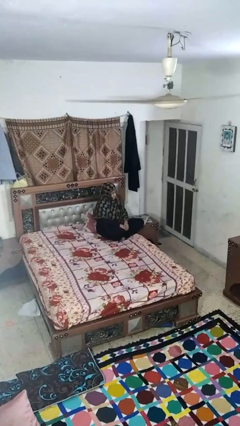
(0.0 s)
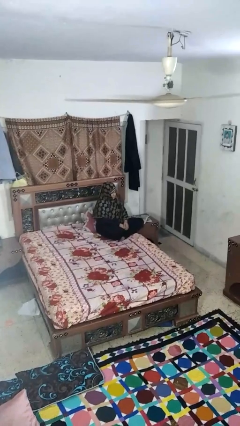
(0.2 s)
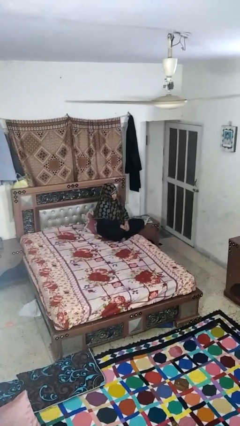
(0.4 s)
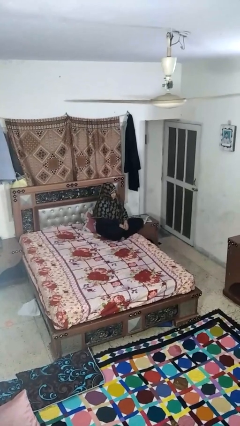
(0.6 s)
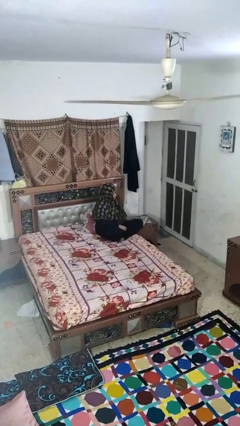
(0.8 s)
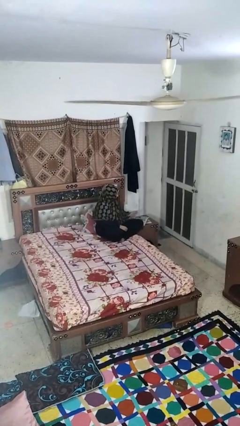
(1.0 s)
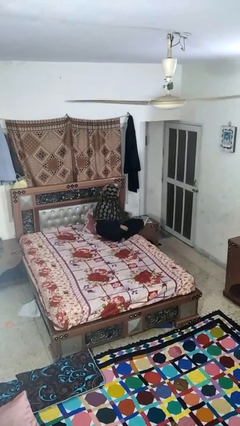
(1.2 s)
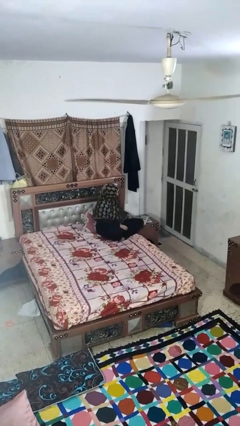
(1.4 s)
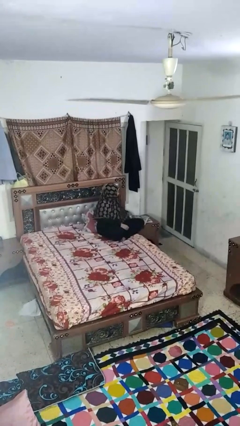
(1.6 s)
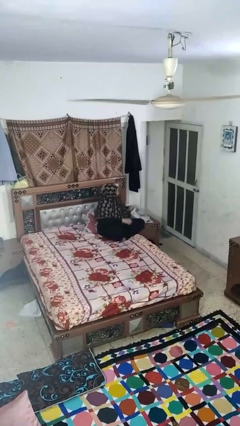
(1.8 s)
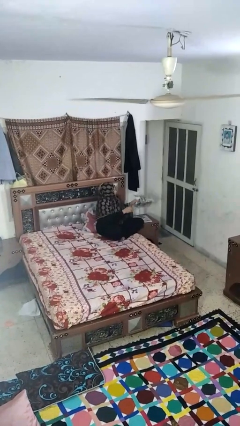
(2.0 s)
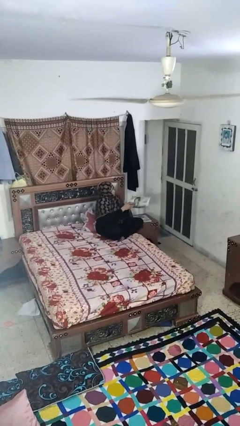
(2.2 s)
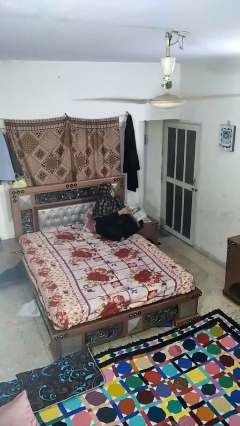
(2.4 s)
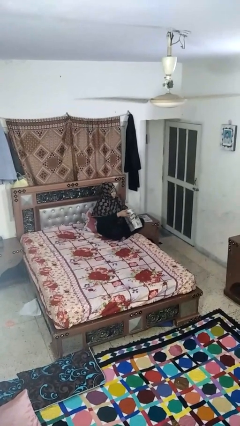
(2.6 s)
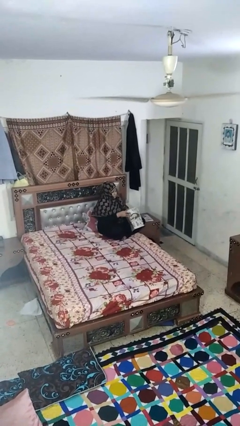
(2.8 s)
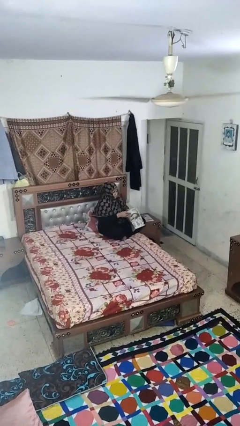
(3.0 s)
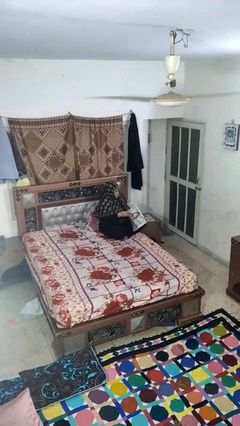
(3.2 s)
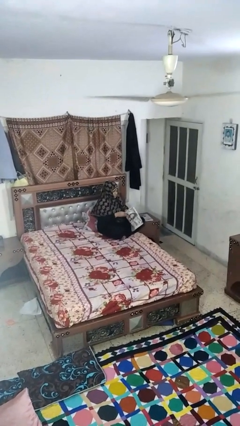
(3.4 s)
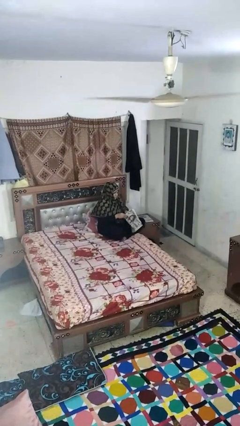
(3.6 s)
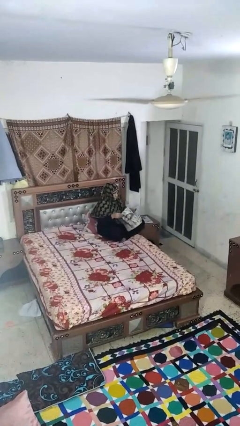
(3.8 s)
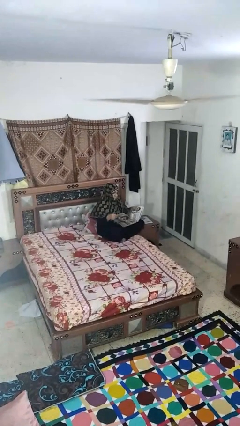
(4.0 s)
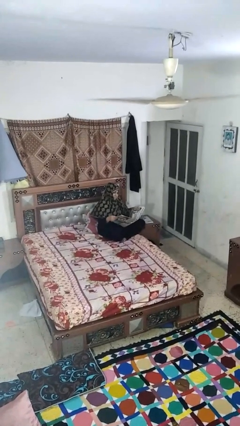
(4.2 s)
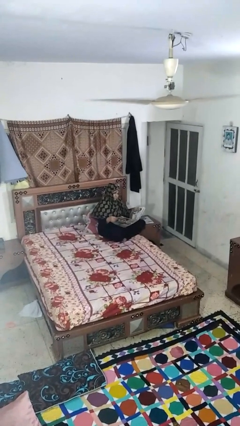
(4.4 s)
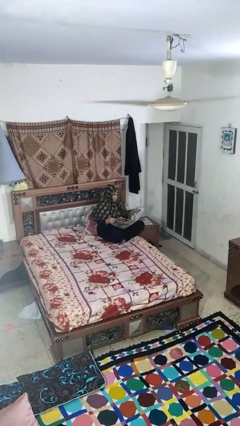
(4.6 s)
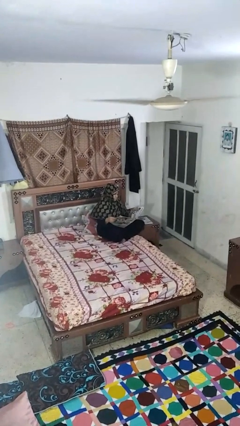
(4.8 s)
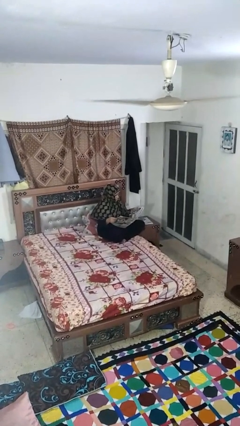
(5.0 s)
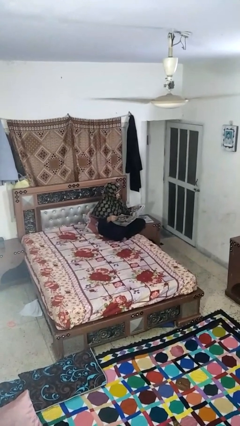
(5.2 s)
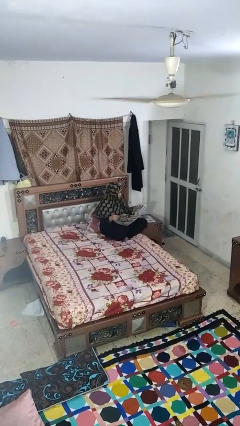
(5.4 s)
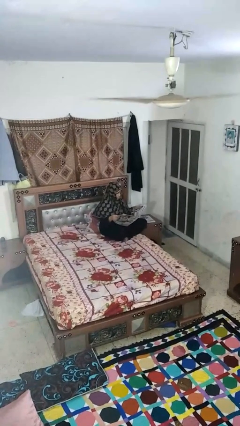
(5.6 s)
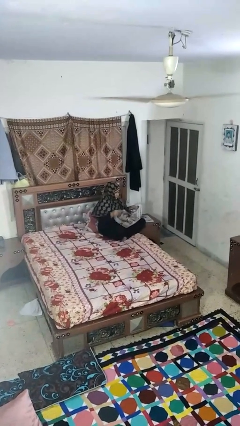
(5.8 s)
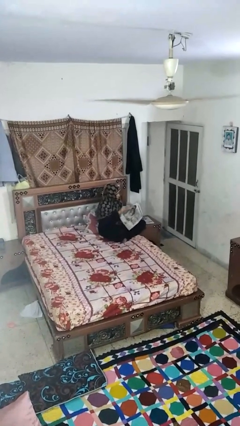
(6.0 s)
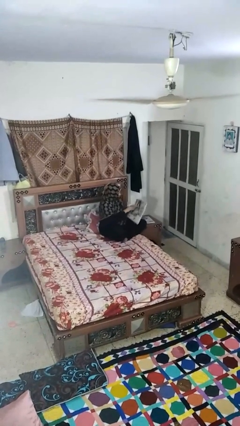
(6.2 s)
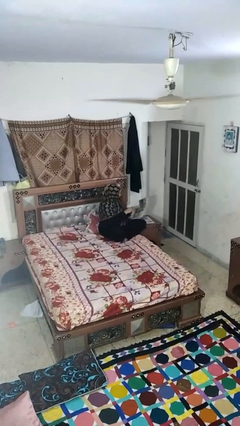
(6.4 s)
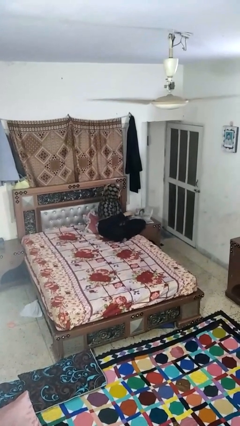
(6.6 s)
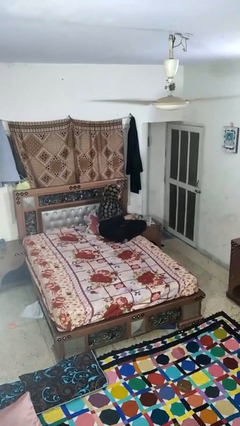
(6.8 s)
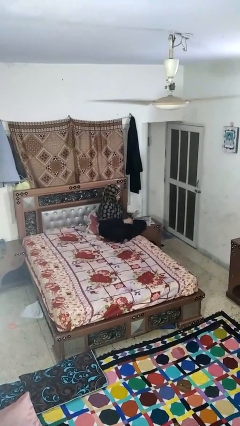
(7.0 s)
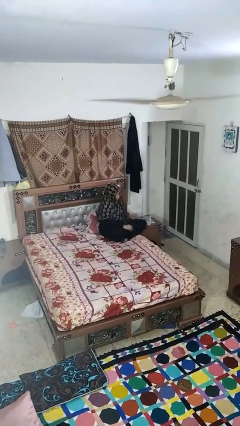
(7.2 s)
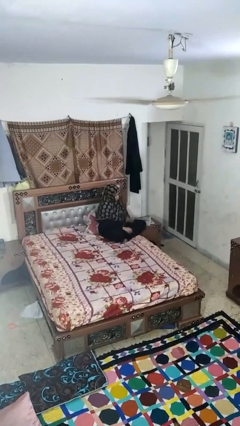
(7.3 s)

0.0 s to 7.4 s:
person reads magazine

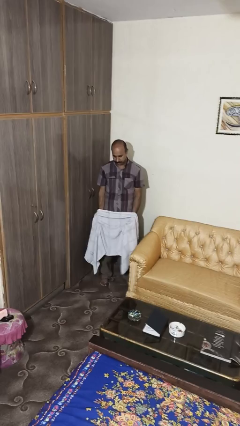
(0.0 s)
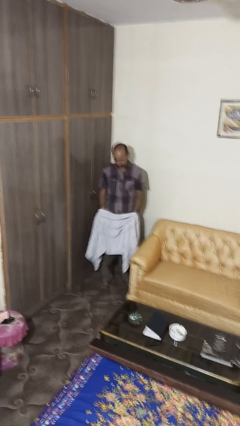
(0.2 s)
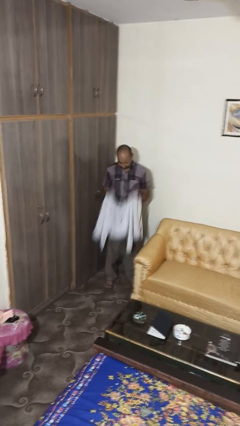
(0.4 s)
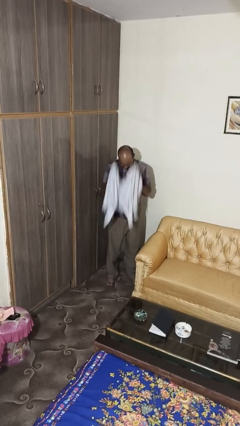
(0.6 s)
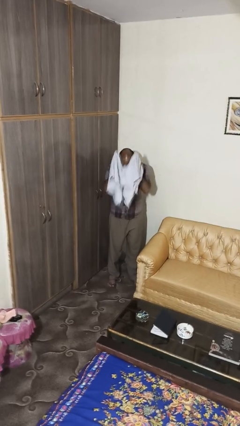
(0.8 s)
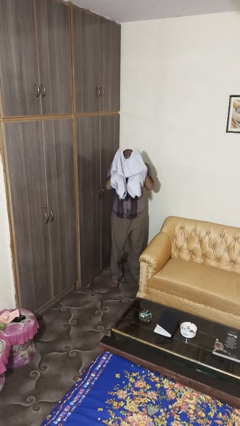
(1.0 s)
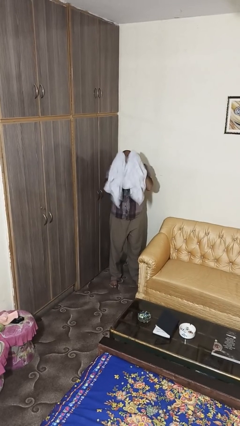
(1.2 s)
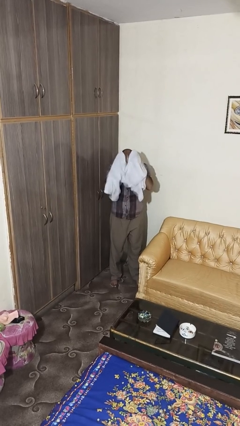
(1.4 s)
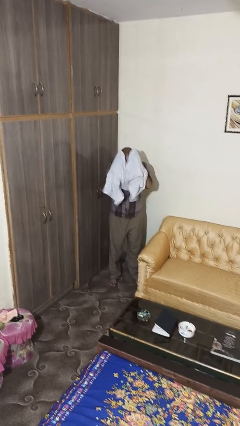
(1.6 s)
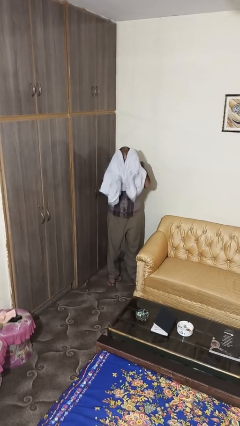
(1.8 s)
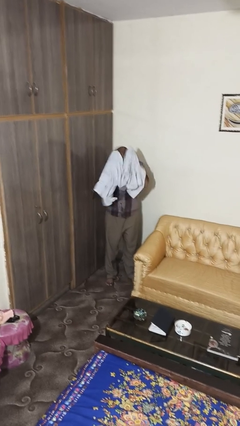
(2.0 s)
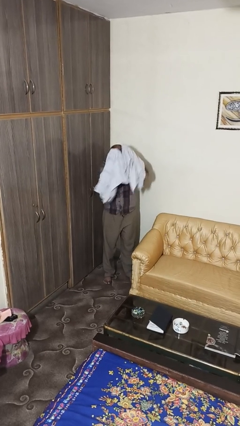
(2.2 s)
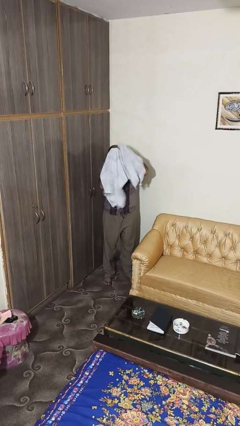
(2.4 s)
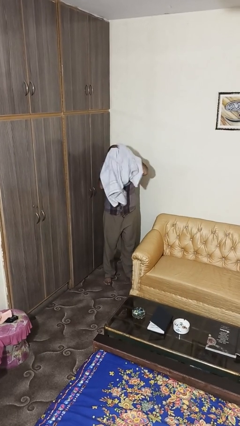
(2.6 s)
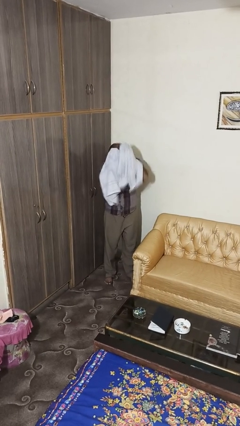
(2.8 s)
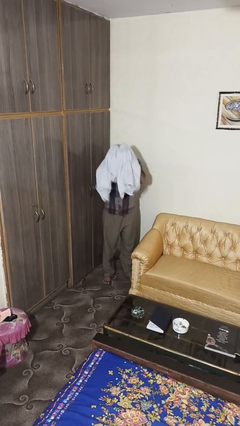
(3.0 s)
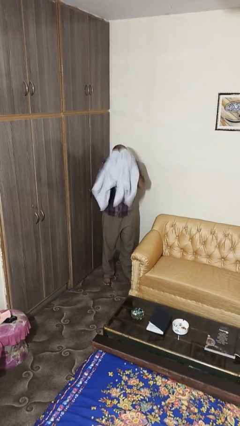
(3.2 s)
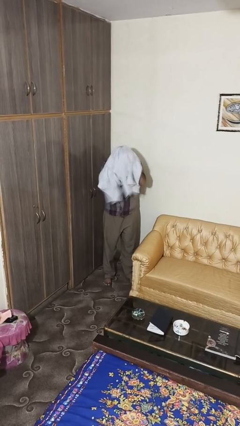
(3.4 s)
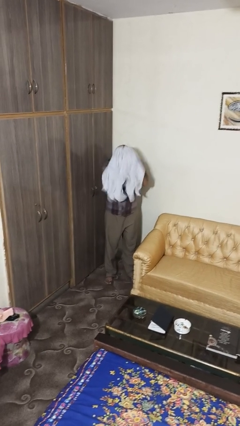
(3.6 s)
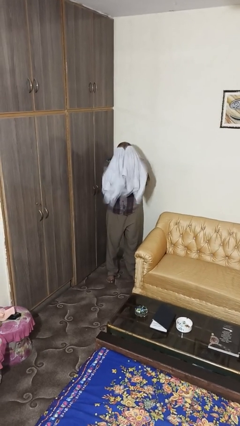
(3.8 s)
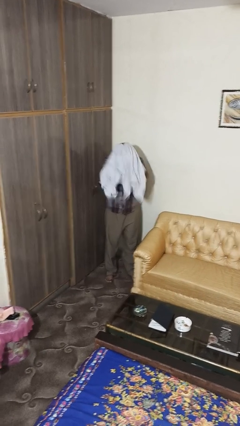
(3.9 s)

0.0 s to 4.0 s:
person dries hair with towel

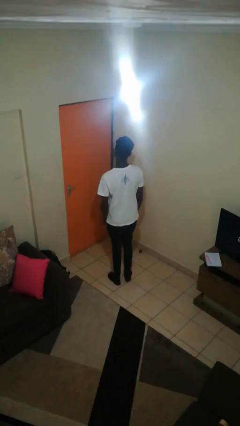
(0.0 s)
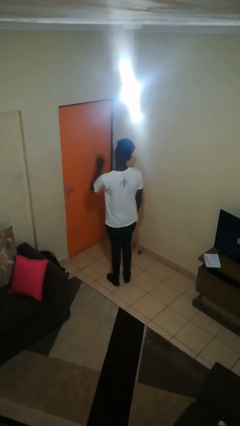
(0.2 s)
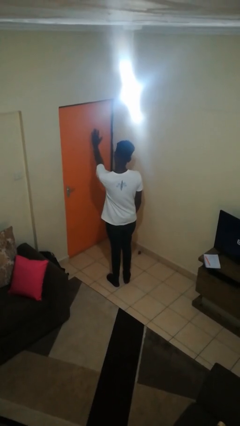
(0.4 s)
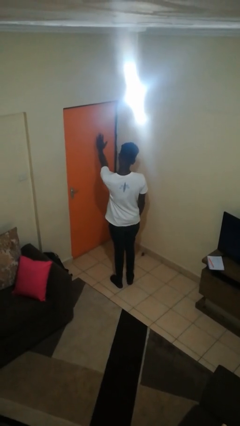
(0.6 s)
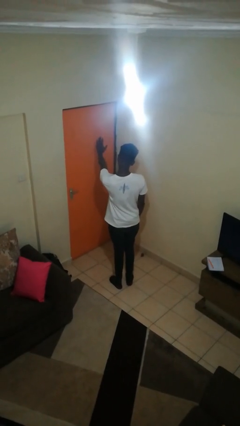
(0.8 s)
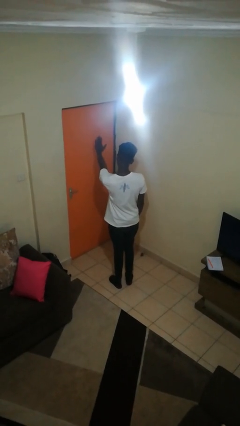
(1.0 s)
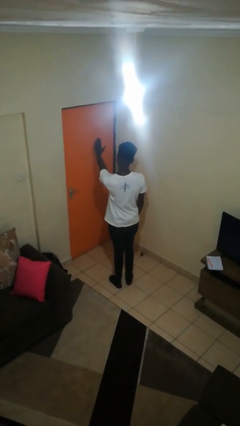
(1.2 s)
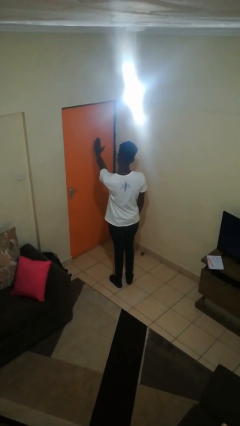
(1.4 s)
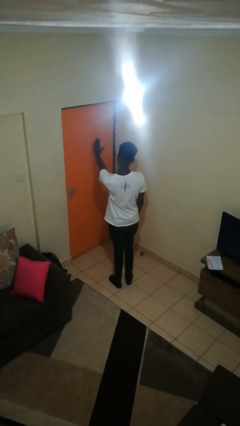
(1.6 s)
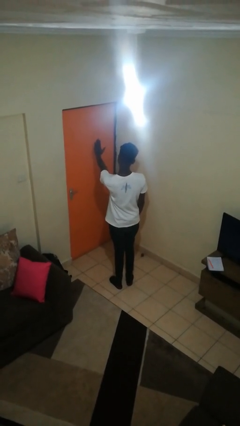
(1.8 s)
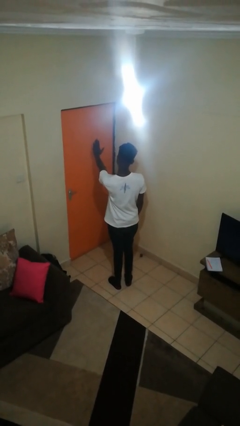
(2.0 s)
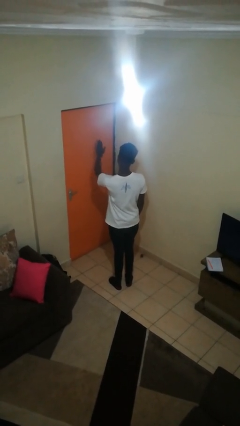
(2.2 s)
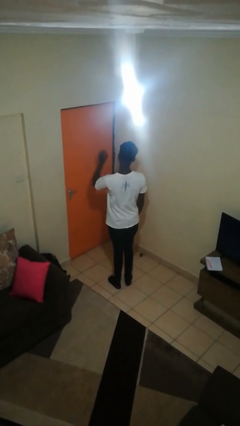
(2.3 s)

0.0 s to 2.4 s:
person gestures stop

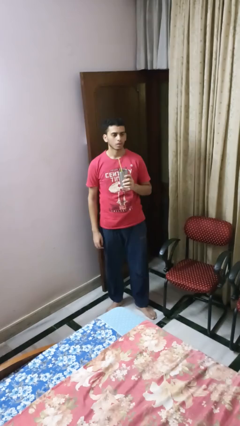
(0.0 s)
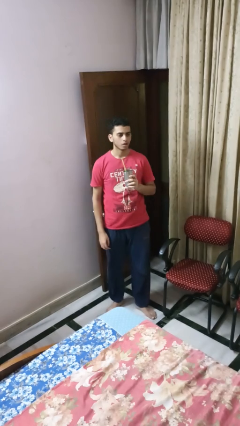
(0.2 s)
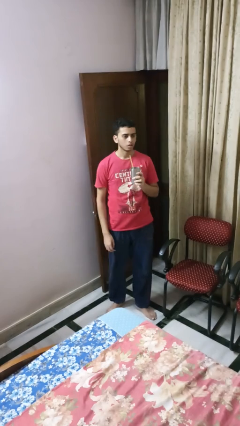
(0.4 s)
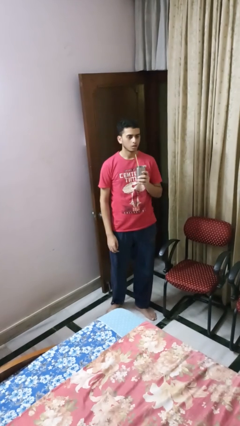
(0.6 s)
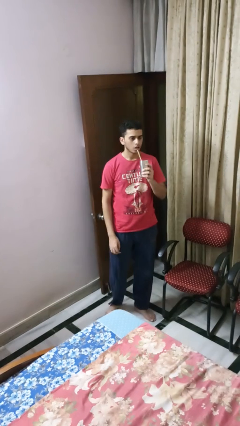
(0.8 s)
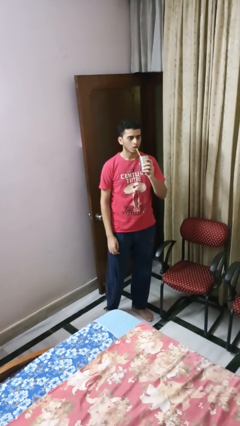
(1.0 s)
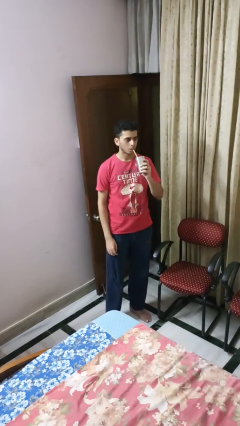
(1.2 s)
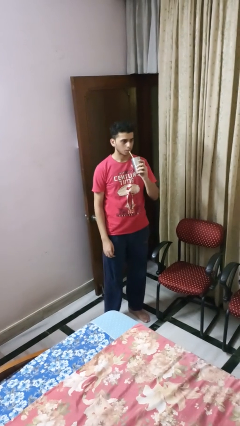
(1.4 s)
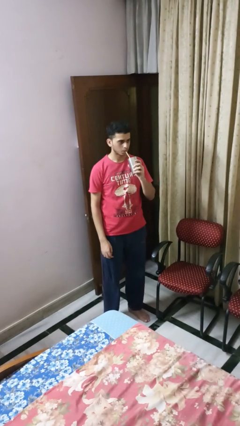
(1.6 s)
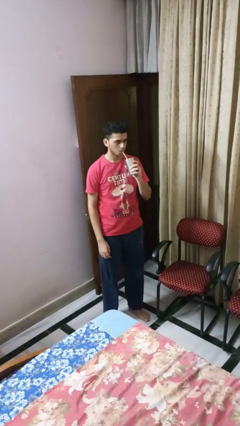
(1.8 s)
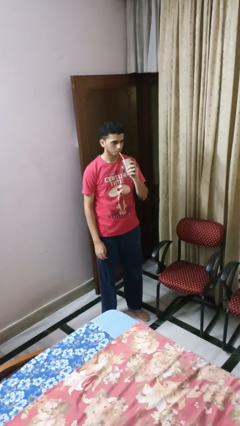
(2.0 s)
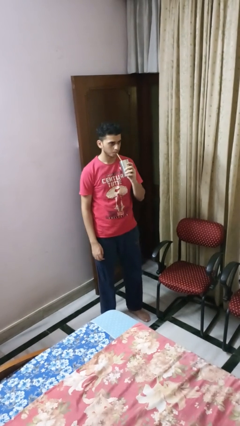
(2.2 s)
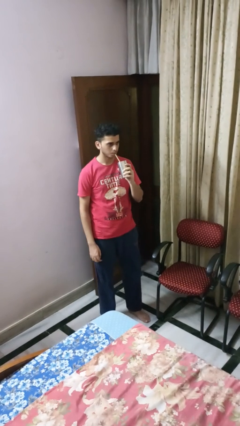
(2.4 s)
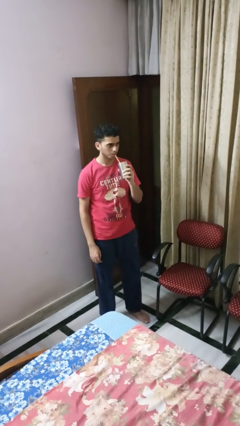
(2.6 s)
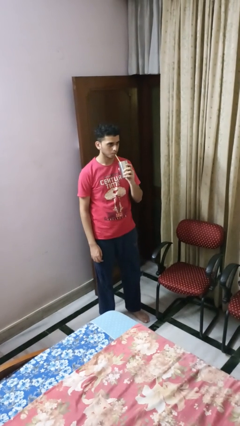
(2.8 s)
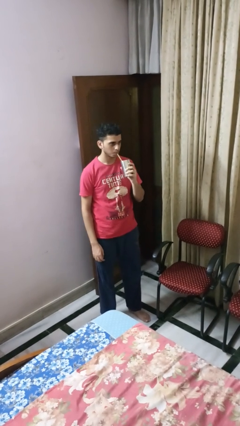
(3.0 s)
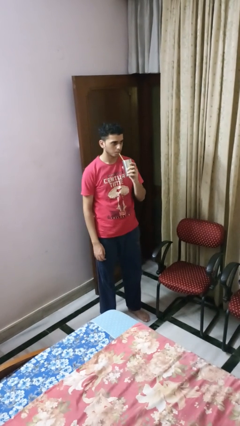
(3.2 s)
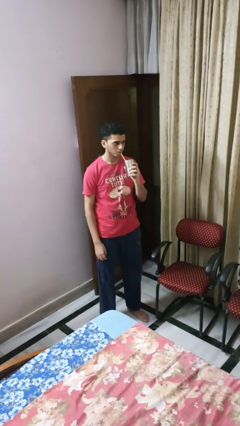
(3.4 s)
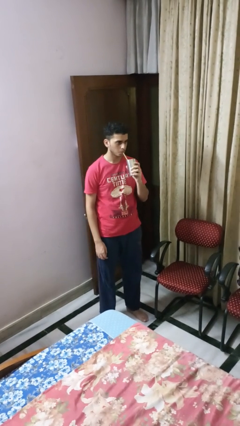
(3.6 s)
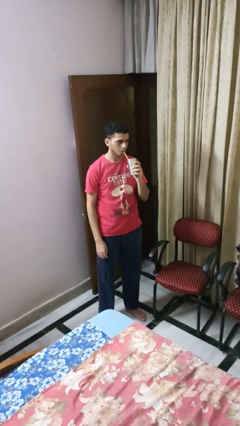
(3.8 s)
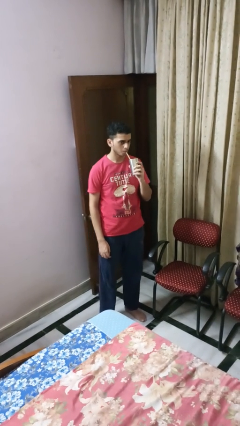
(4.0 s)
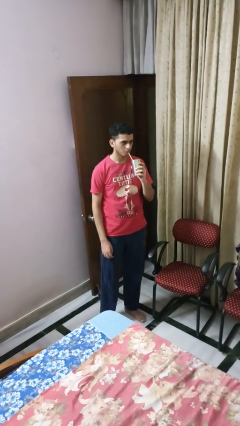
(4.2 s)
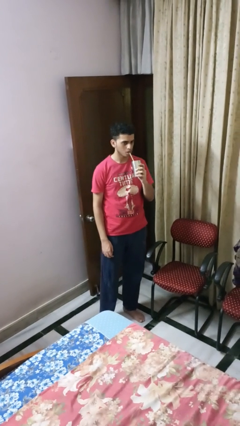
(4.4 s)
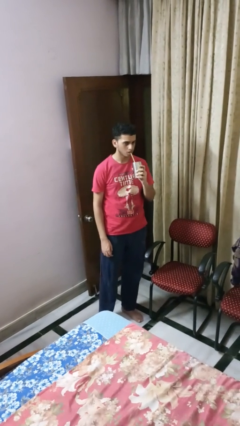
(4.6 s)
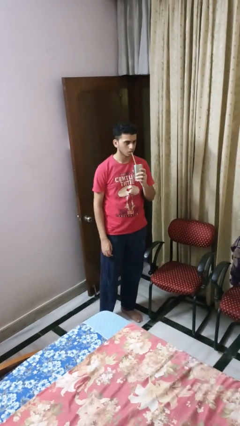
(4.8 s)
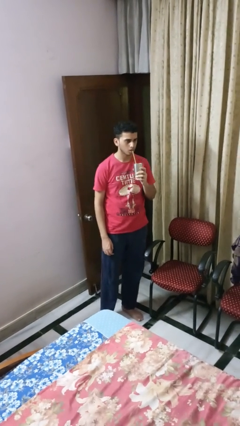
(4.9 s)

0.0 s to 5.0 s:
person drinks from straw
